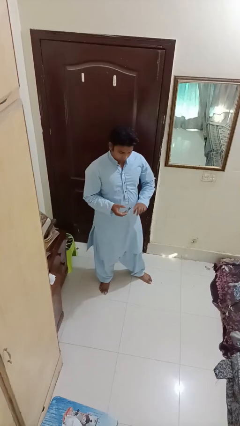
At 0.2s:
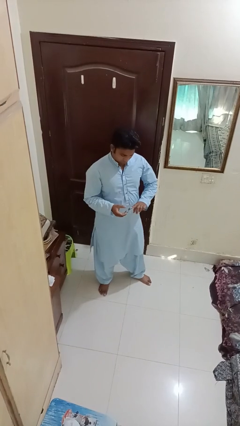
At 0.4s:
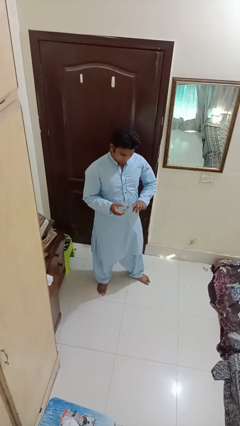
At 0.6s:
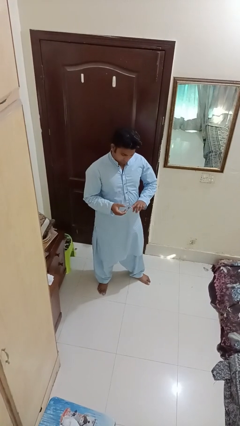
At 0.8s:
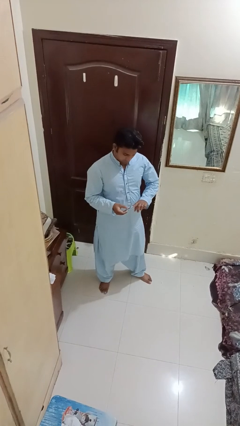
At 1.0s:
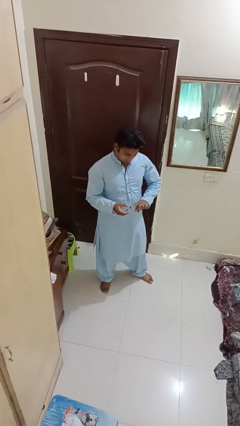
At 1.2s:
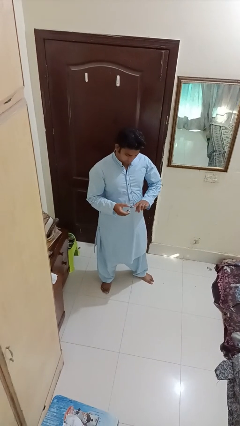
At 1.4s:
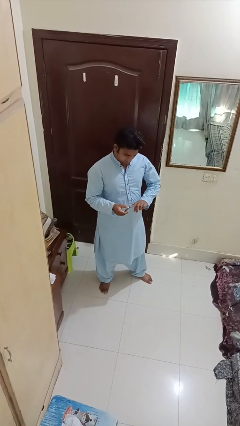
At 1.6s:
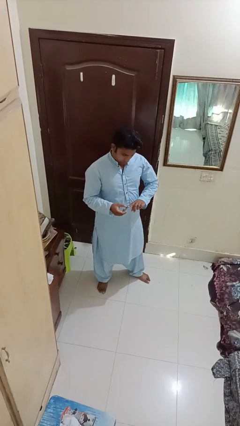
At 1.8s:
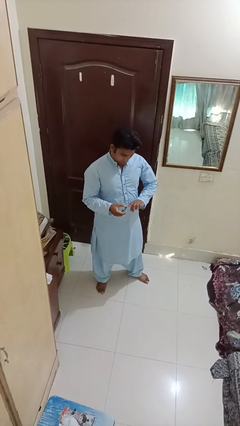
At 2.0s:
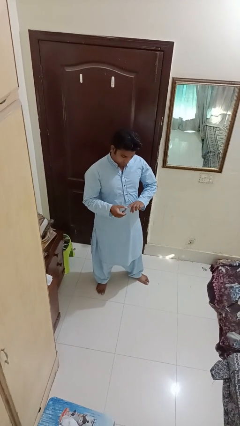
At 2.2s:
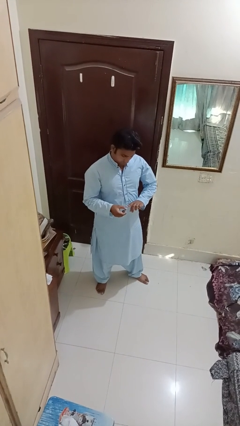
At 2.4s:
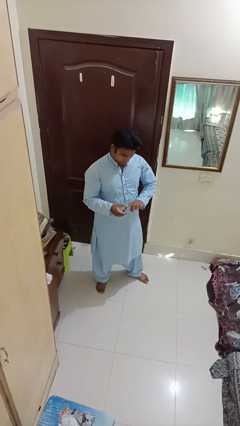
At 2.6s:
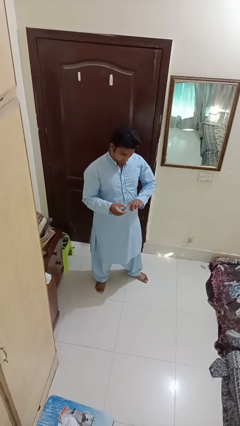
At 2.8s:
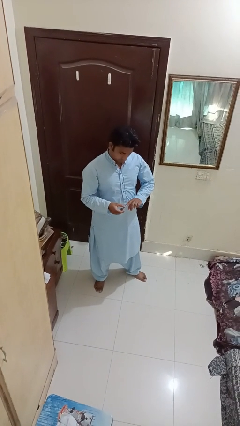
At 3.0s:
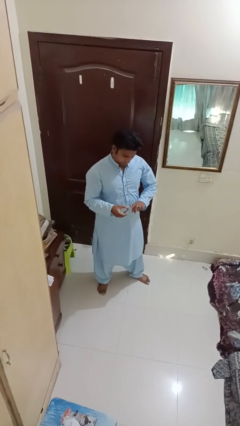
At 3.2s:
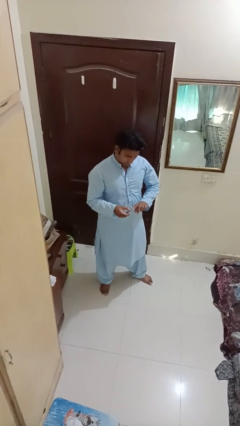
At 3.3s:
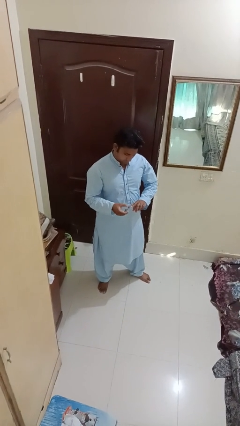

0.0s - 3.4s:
person clips fingernails

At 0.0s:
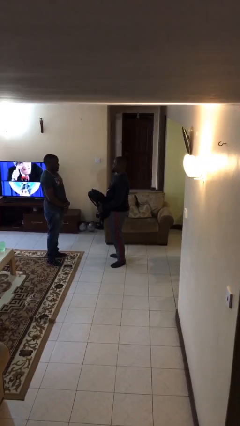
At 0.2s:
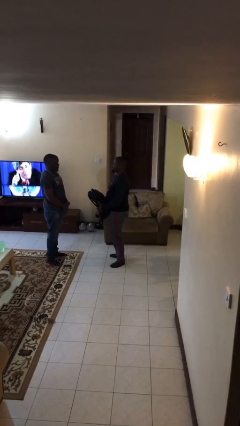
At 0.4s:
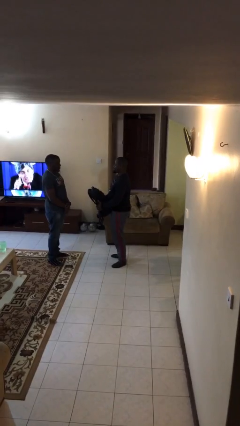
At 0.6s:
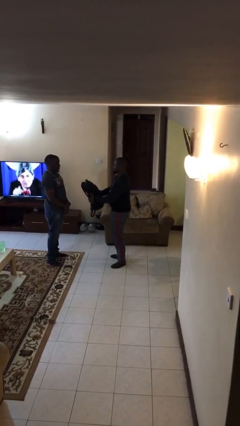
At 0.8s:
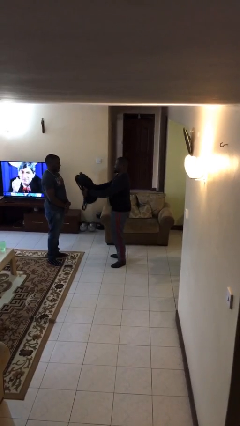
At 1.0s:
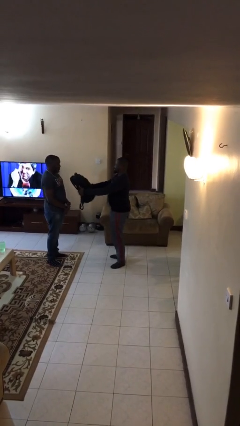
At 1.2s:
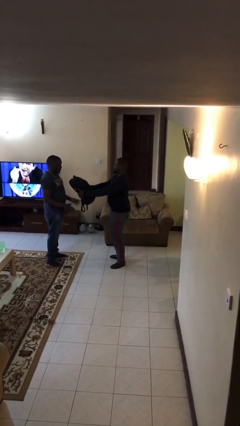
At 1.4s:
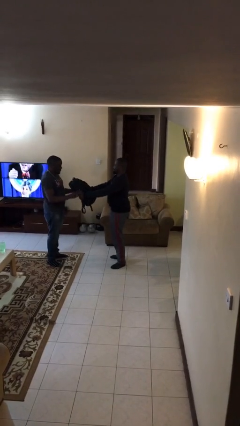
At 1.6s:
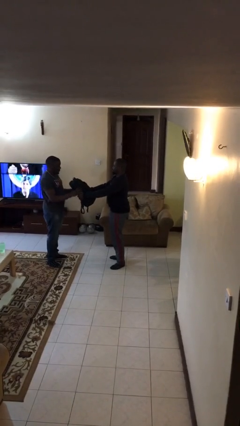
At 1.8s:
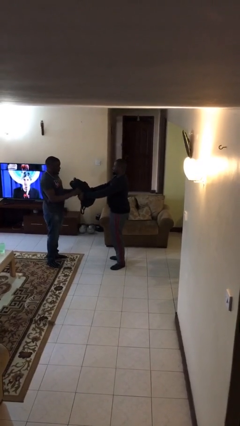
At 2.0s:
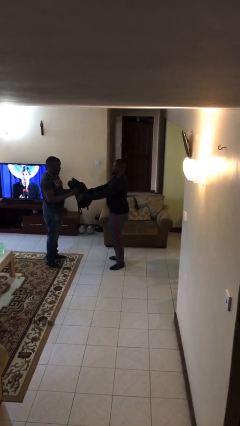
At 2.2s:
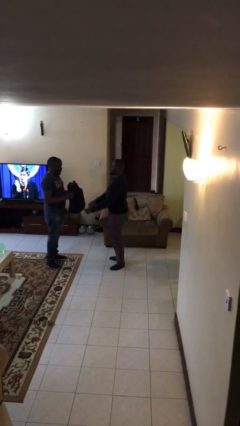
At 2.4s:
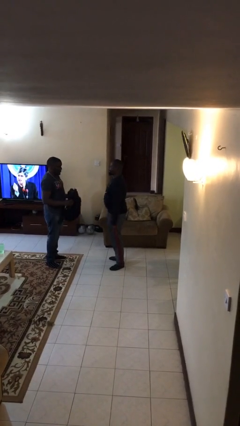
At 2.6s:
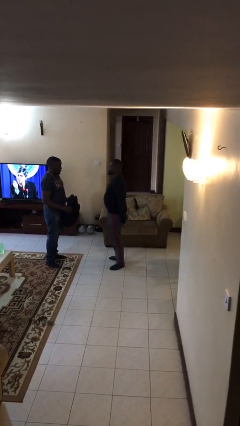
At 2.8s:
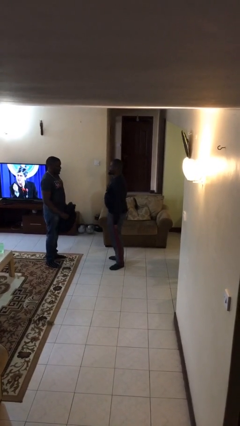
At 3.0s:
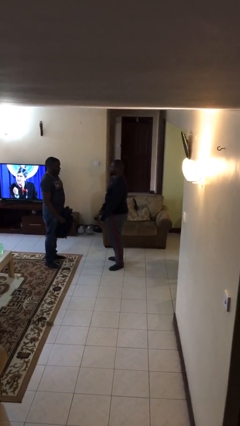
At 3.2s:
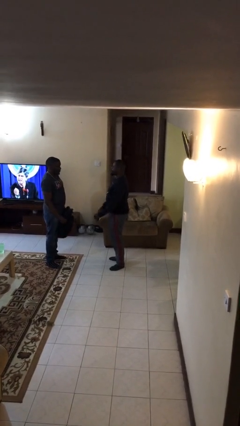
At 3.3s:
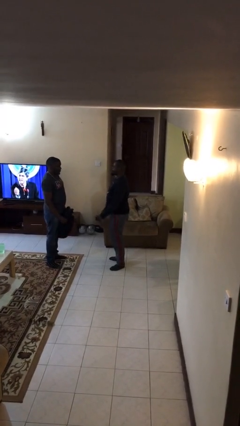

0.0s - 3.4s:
person transfers object to person

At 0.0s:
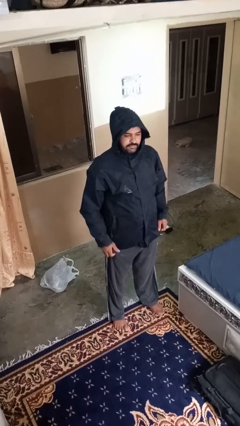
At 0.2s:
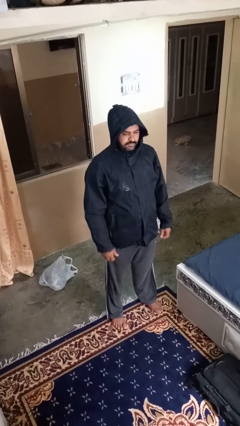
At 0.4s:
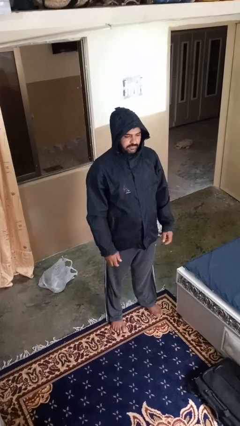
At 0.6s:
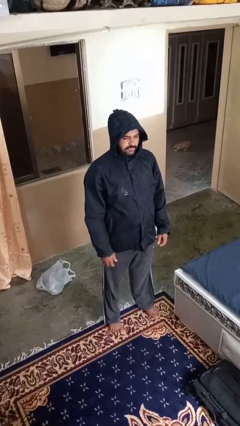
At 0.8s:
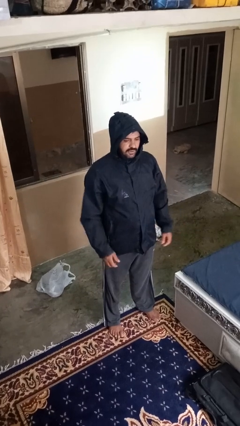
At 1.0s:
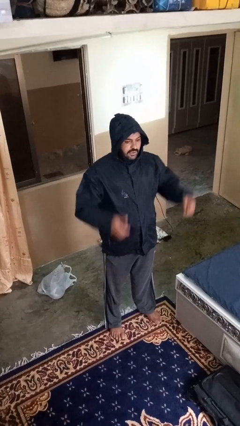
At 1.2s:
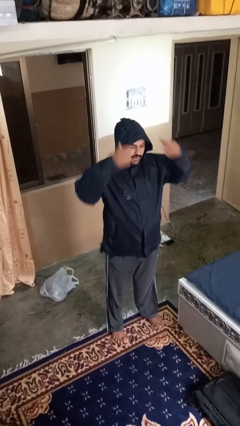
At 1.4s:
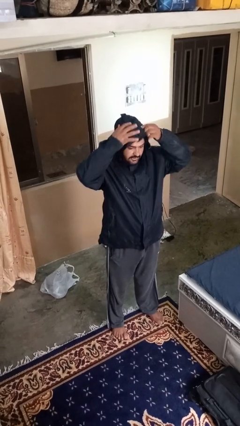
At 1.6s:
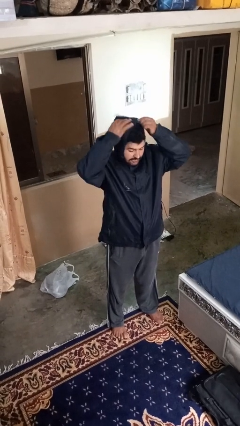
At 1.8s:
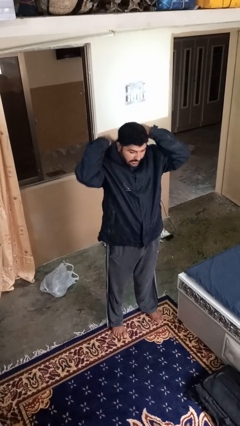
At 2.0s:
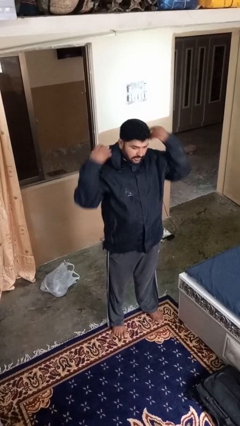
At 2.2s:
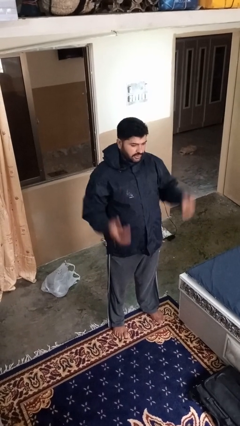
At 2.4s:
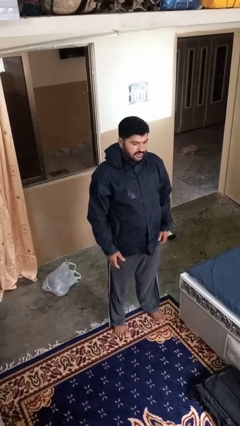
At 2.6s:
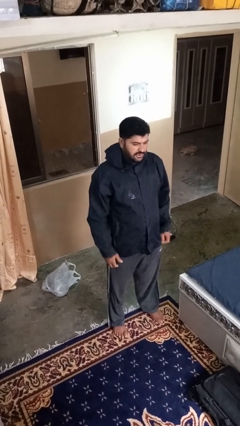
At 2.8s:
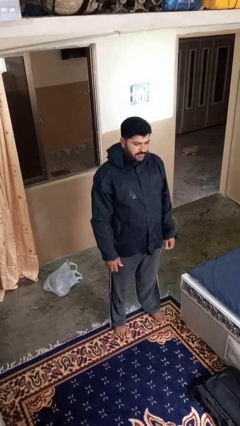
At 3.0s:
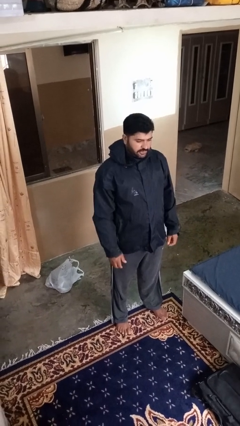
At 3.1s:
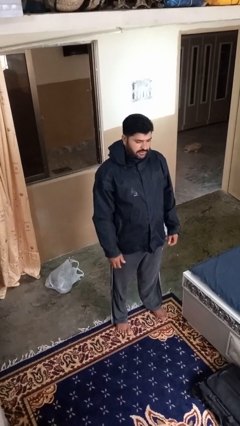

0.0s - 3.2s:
person takes off hoodie

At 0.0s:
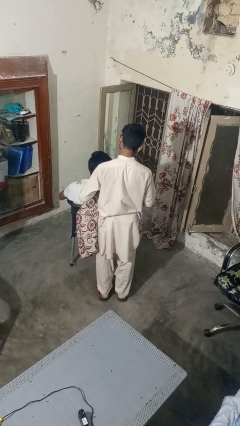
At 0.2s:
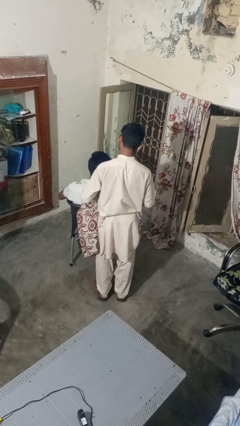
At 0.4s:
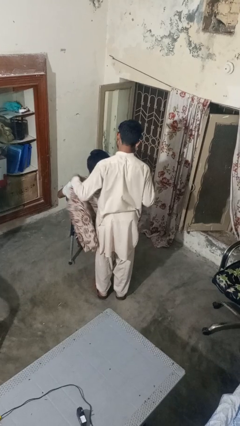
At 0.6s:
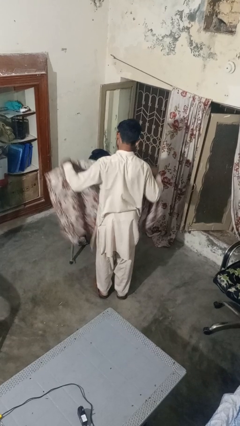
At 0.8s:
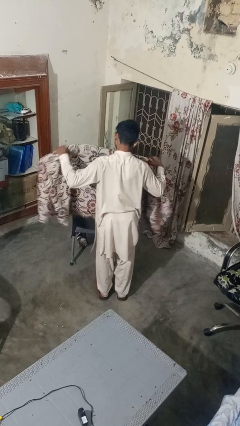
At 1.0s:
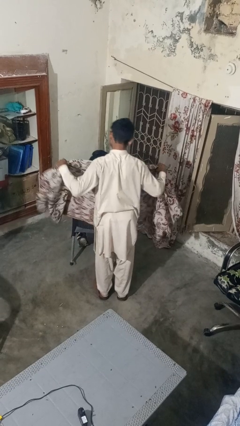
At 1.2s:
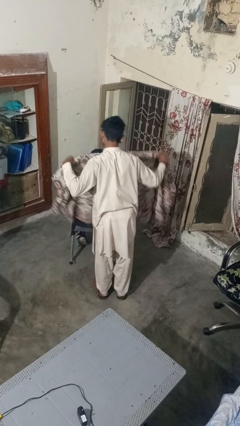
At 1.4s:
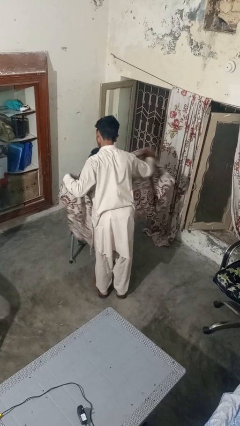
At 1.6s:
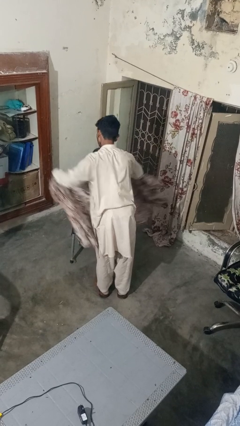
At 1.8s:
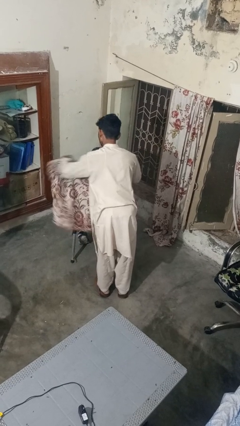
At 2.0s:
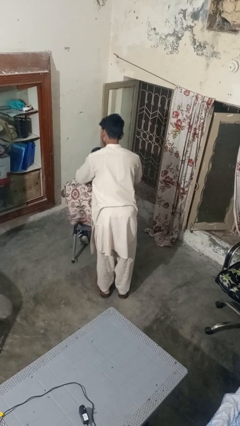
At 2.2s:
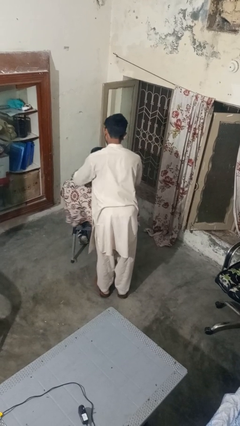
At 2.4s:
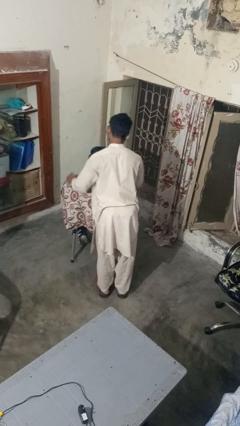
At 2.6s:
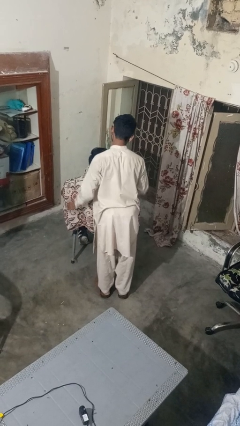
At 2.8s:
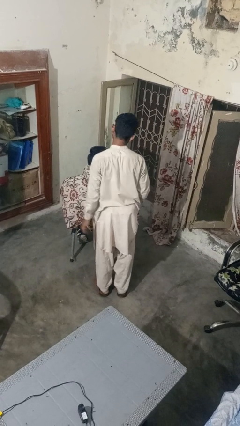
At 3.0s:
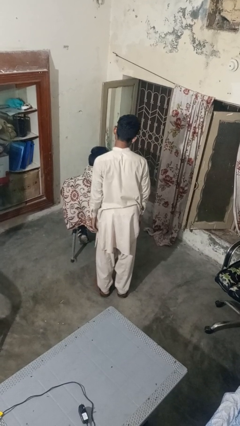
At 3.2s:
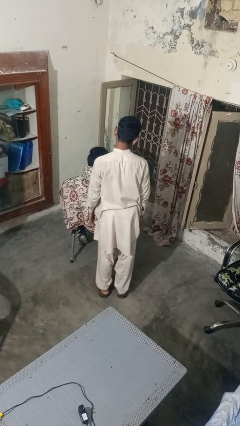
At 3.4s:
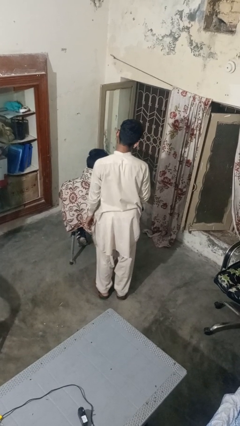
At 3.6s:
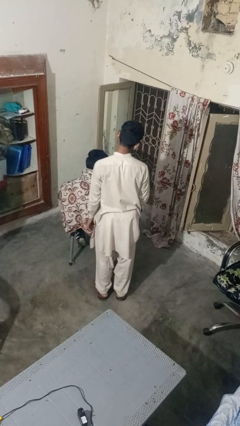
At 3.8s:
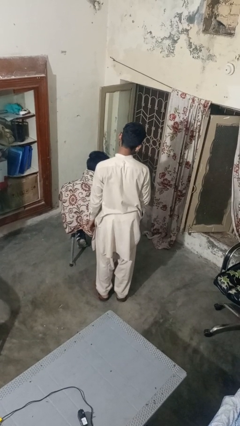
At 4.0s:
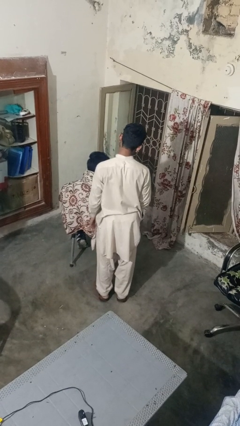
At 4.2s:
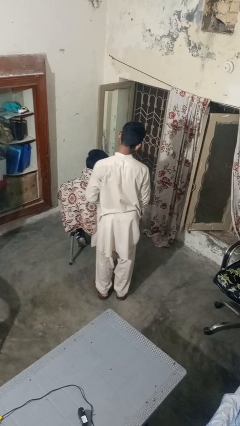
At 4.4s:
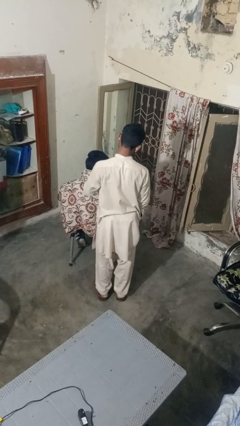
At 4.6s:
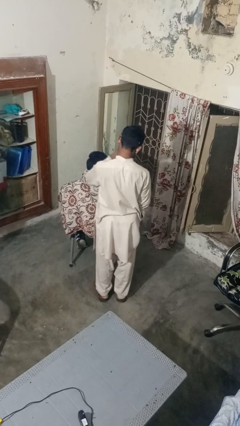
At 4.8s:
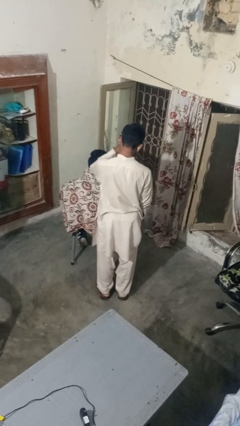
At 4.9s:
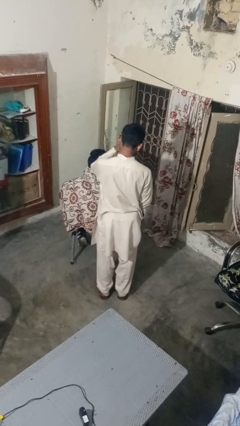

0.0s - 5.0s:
person covers friend with blanket

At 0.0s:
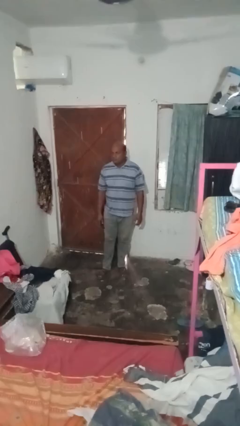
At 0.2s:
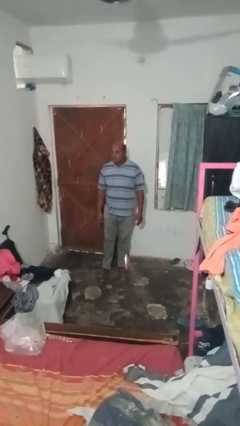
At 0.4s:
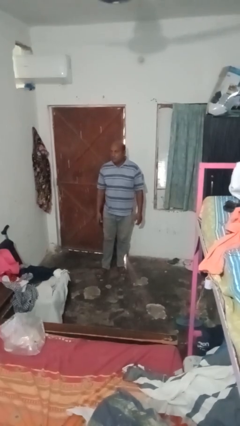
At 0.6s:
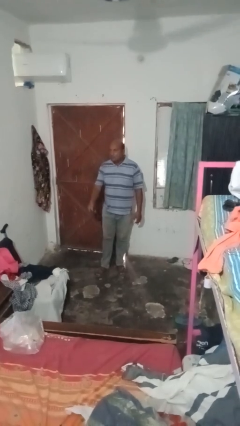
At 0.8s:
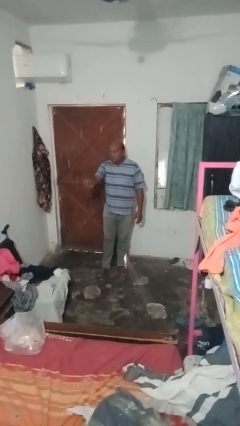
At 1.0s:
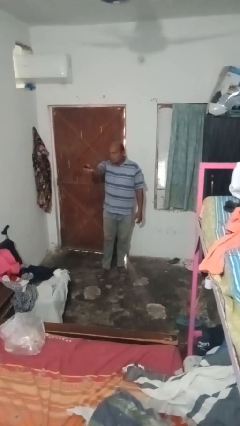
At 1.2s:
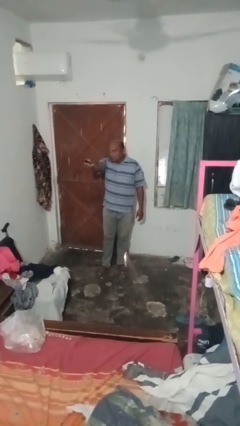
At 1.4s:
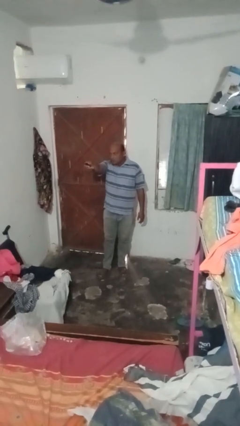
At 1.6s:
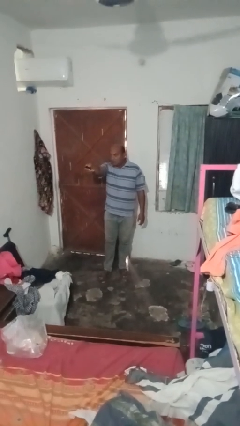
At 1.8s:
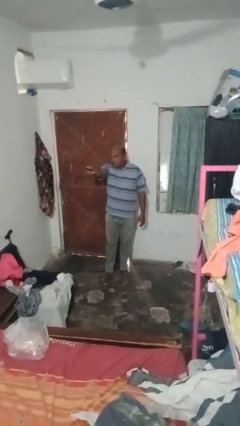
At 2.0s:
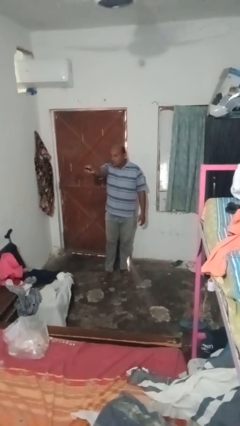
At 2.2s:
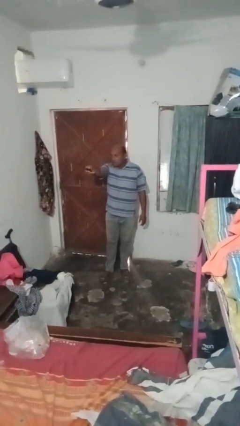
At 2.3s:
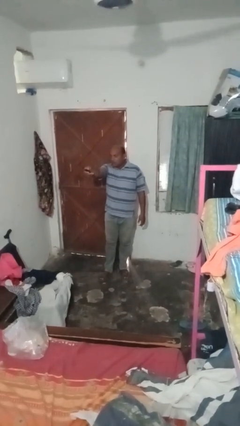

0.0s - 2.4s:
person uses television remote

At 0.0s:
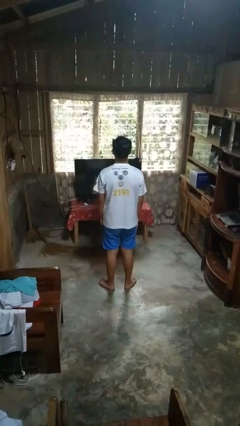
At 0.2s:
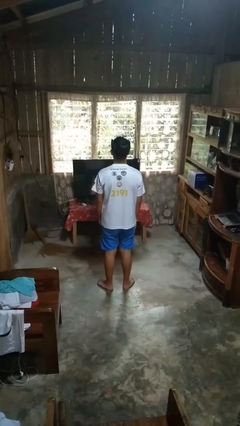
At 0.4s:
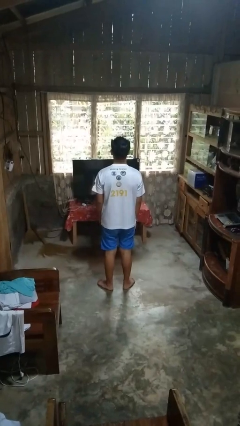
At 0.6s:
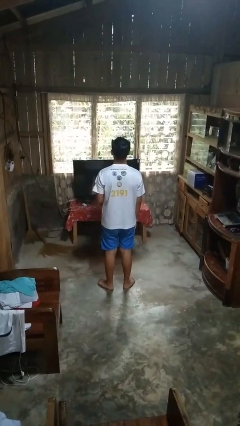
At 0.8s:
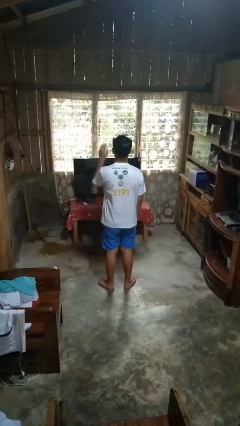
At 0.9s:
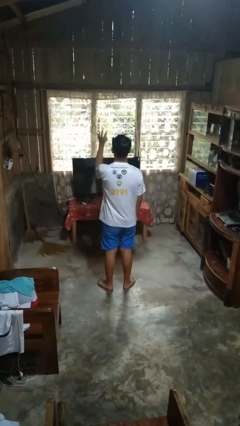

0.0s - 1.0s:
person gestures come here
